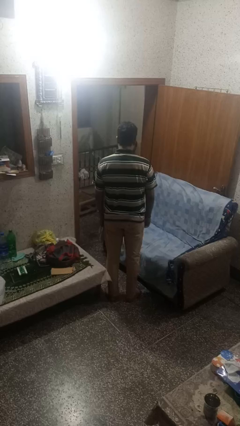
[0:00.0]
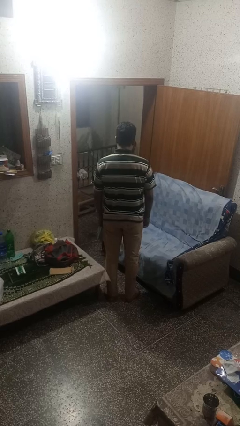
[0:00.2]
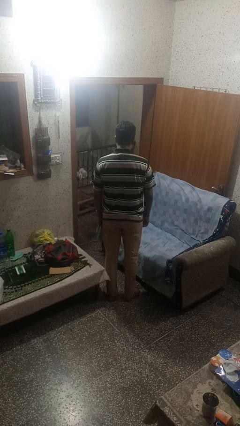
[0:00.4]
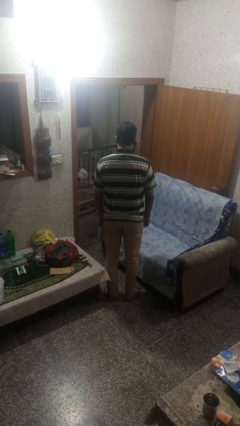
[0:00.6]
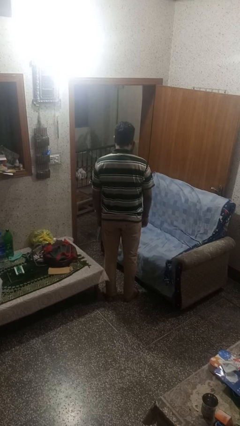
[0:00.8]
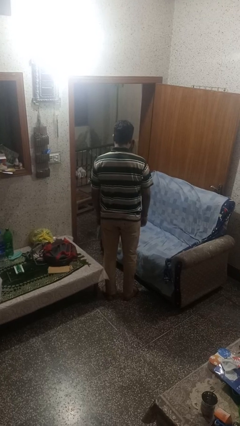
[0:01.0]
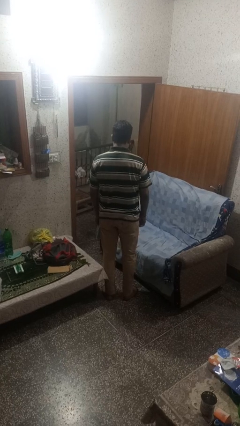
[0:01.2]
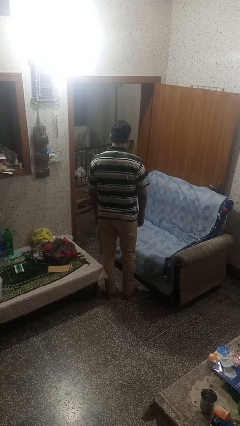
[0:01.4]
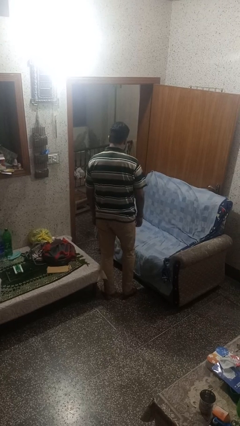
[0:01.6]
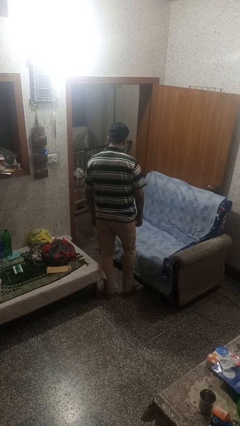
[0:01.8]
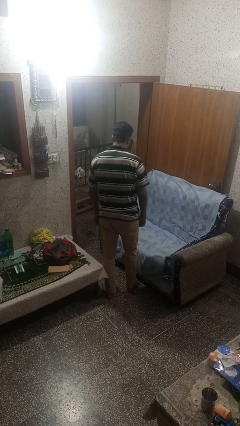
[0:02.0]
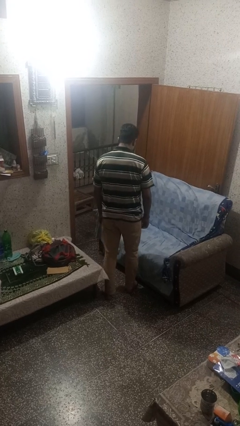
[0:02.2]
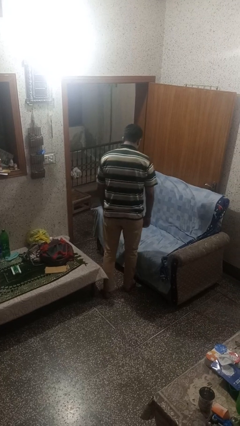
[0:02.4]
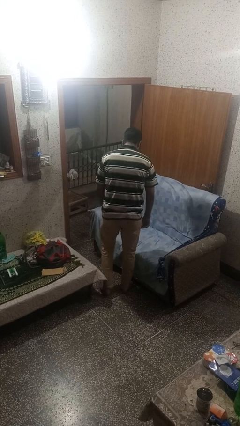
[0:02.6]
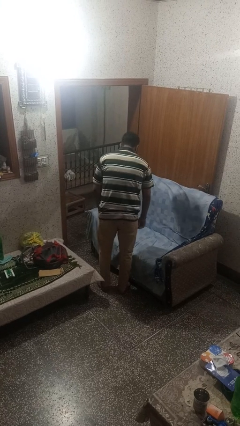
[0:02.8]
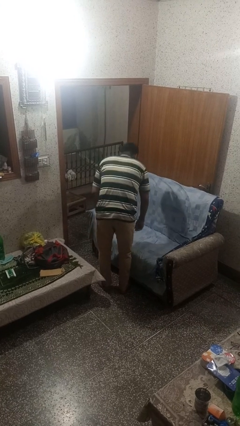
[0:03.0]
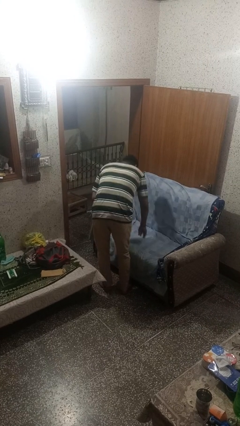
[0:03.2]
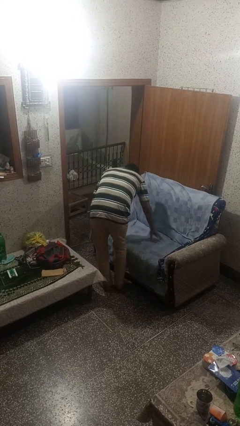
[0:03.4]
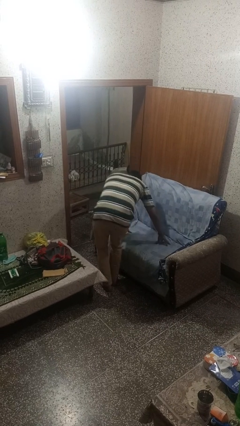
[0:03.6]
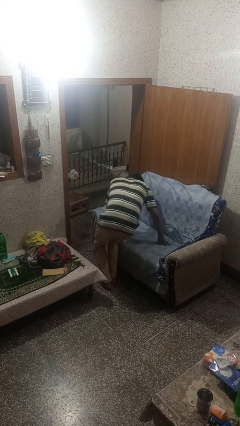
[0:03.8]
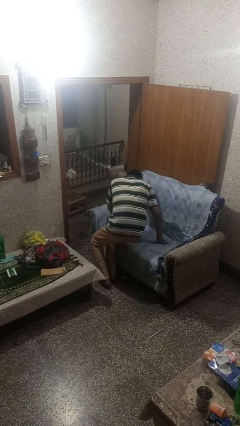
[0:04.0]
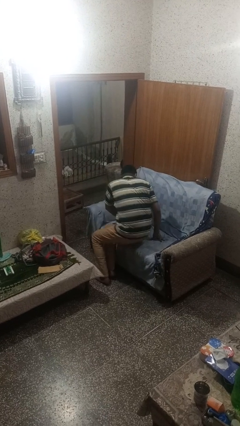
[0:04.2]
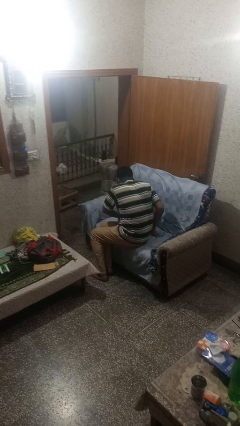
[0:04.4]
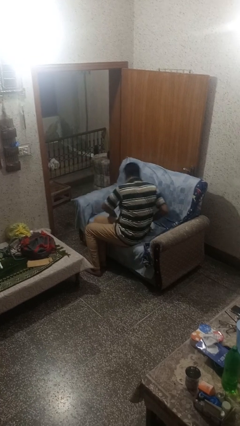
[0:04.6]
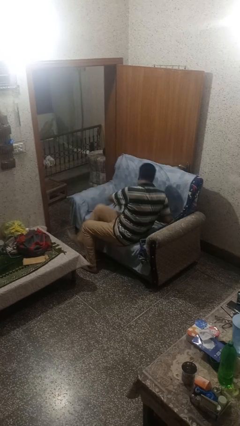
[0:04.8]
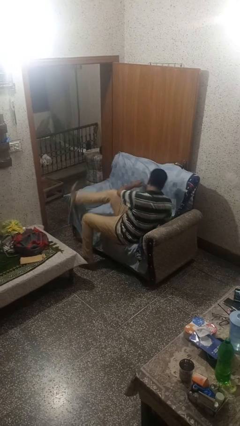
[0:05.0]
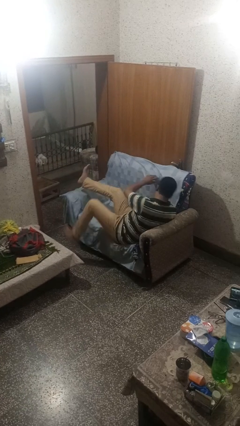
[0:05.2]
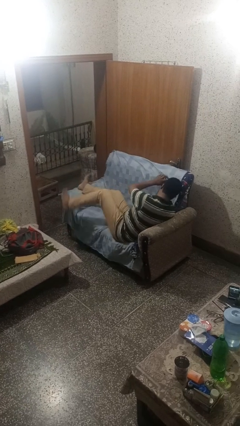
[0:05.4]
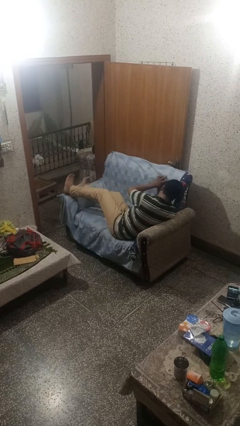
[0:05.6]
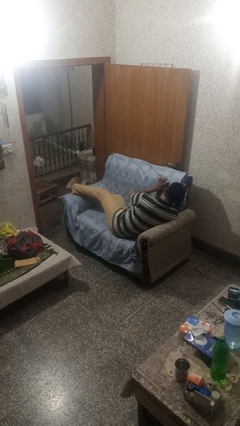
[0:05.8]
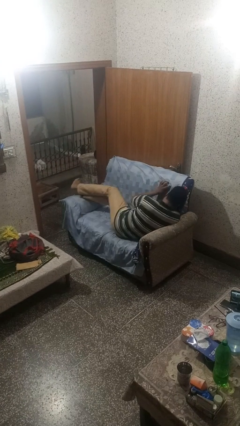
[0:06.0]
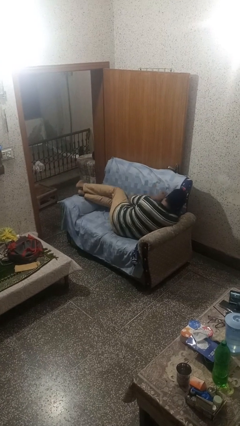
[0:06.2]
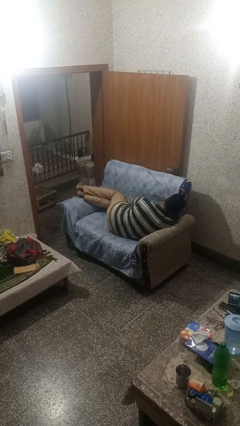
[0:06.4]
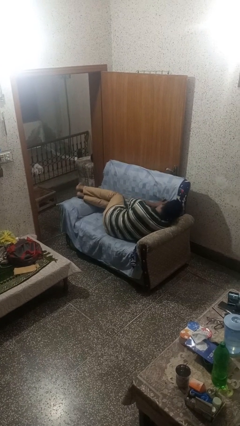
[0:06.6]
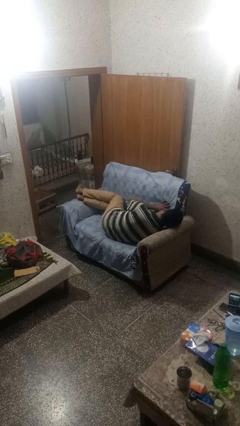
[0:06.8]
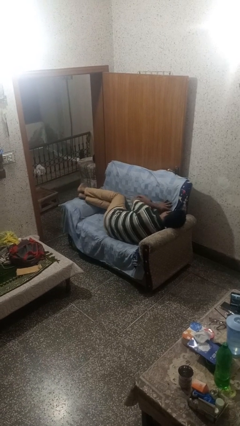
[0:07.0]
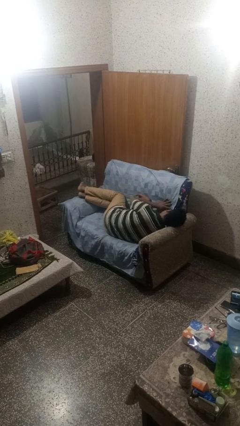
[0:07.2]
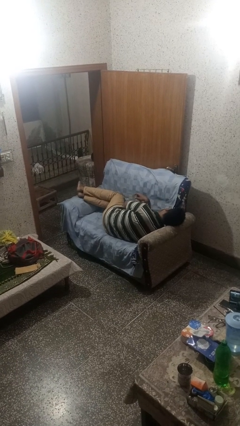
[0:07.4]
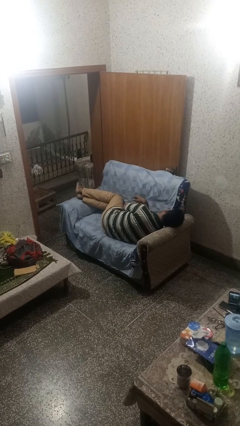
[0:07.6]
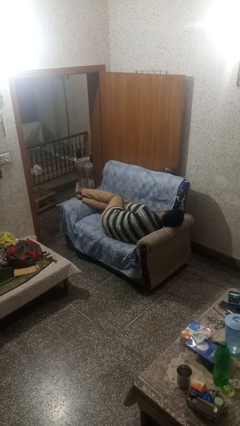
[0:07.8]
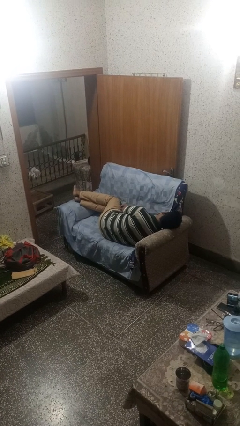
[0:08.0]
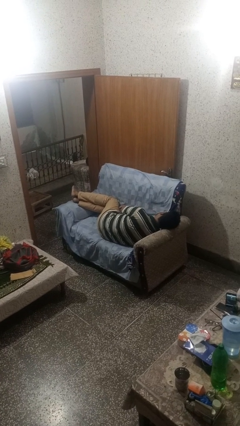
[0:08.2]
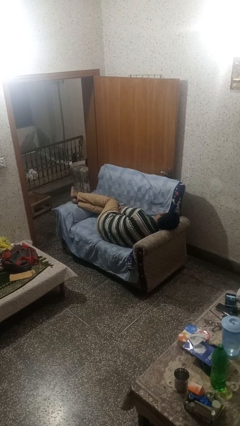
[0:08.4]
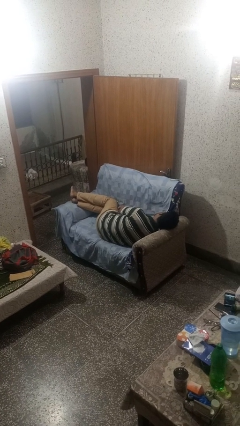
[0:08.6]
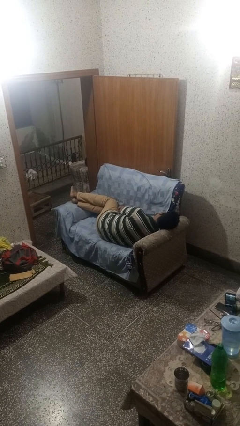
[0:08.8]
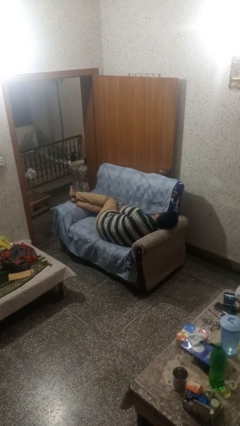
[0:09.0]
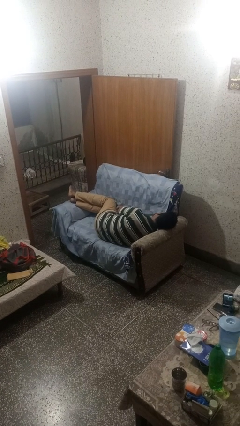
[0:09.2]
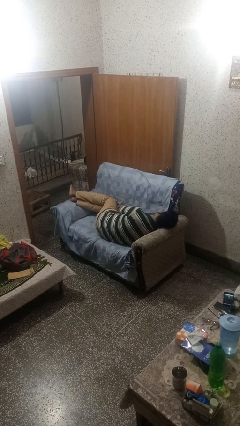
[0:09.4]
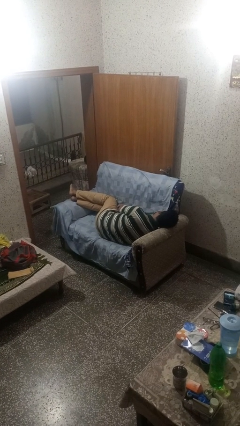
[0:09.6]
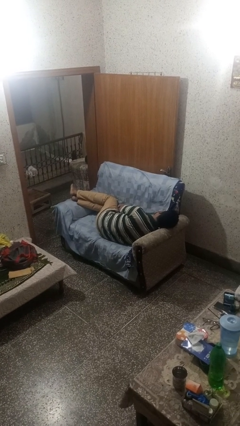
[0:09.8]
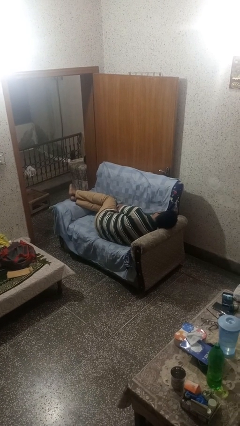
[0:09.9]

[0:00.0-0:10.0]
person lies down on couch

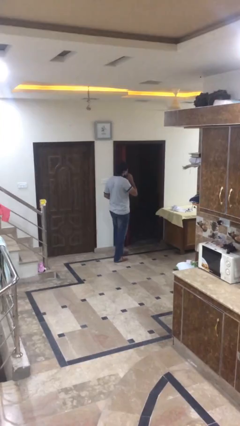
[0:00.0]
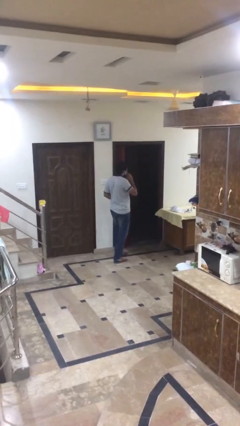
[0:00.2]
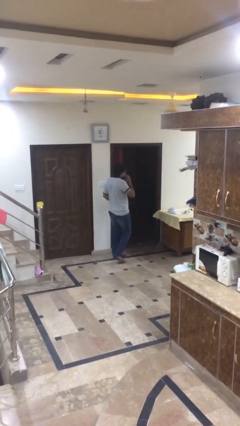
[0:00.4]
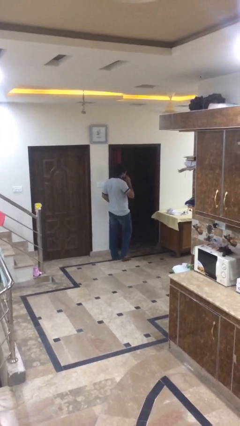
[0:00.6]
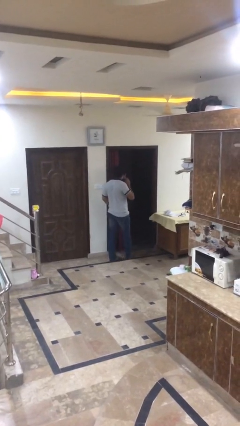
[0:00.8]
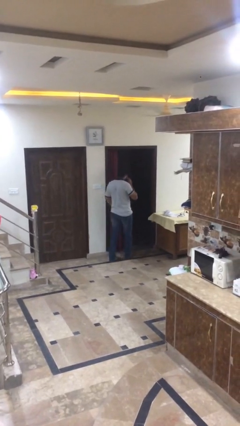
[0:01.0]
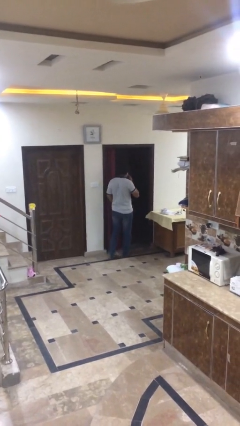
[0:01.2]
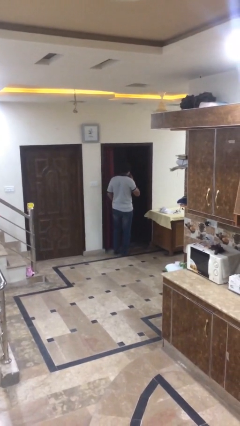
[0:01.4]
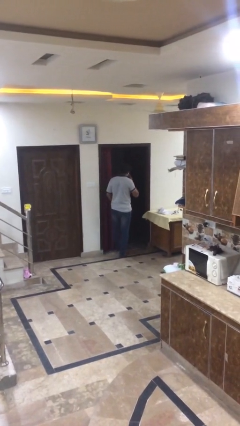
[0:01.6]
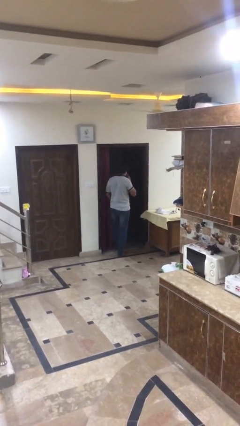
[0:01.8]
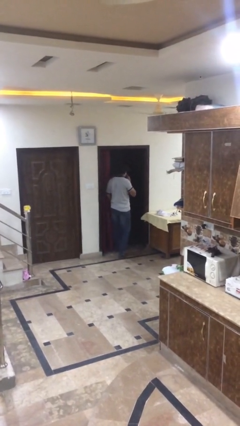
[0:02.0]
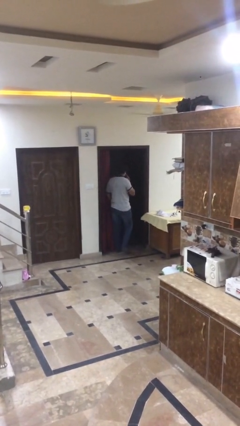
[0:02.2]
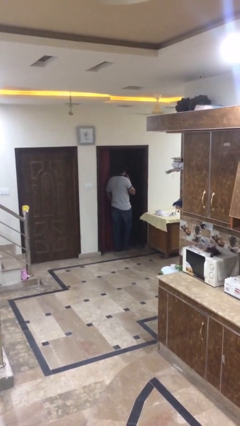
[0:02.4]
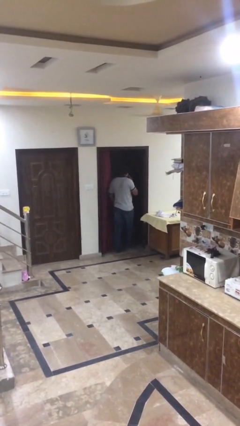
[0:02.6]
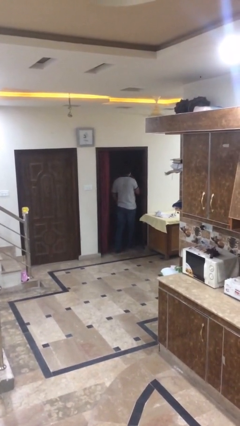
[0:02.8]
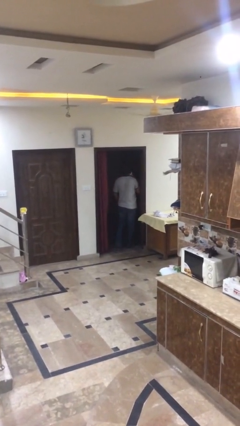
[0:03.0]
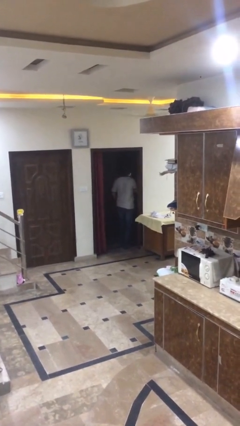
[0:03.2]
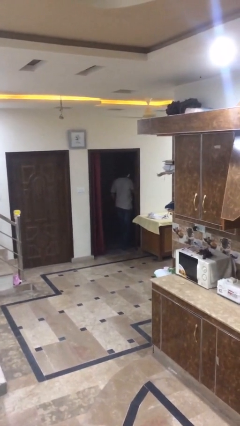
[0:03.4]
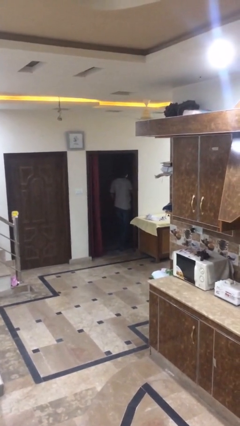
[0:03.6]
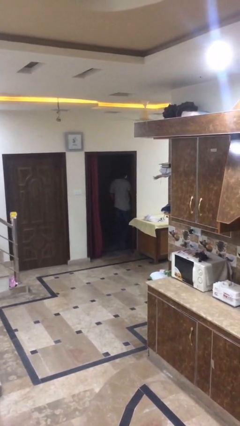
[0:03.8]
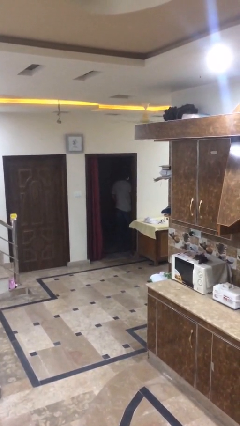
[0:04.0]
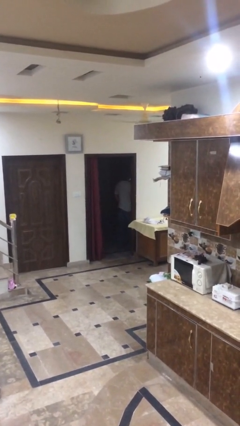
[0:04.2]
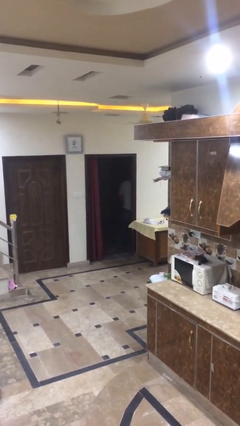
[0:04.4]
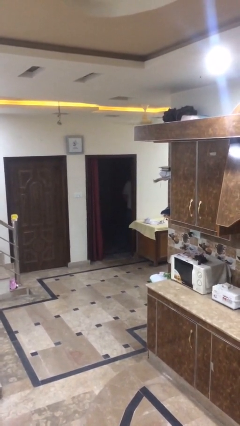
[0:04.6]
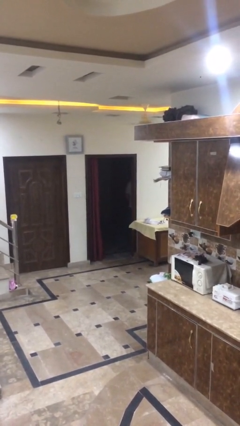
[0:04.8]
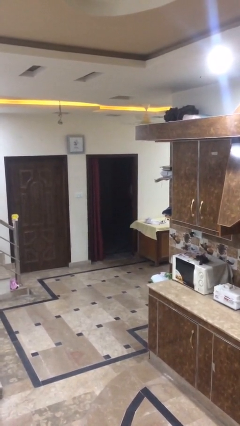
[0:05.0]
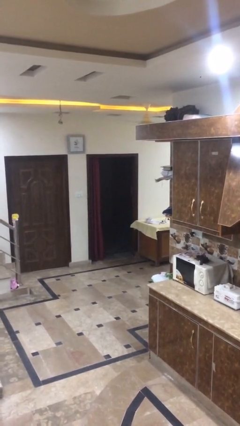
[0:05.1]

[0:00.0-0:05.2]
person exits scene through structure

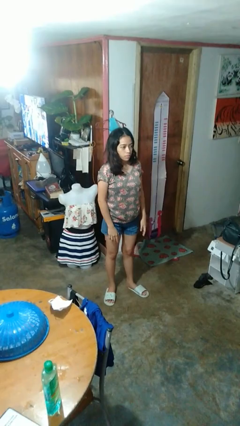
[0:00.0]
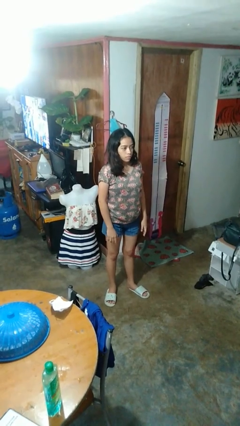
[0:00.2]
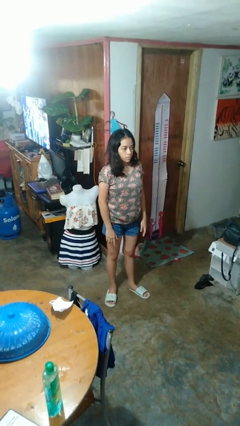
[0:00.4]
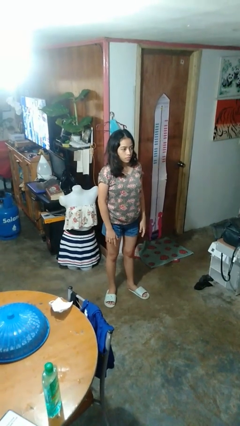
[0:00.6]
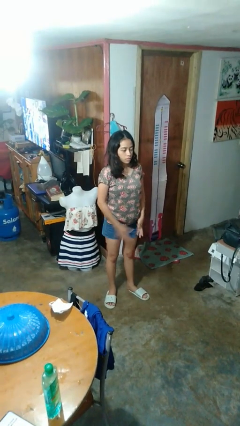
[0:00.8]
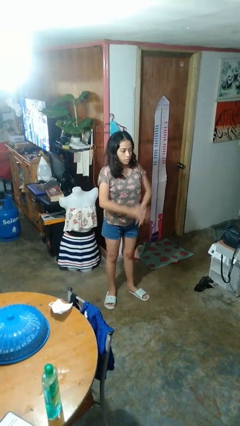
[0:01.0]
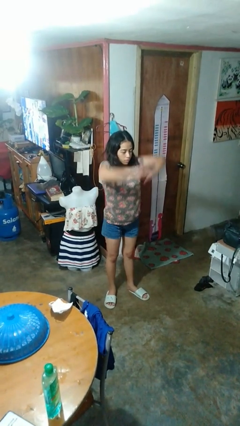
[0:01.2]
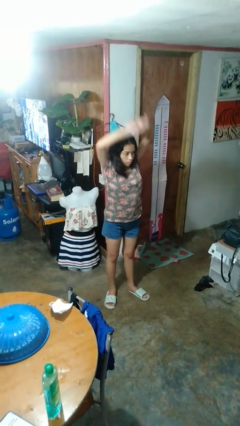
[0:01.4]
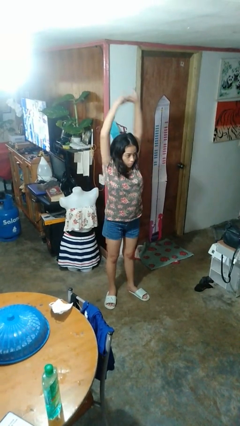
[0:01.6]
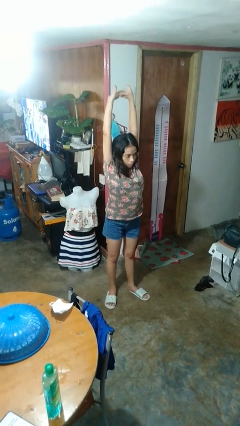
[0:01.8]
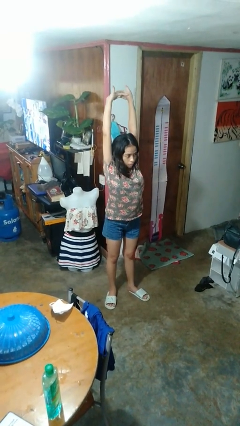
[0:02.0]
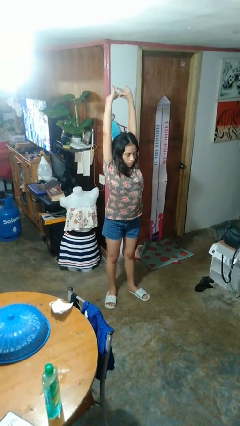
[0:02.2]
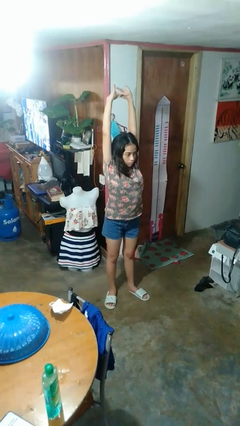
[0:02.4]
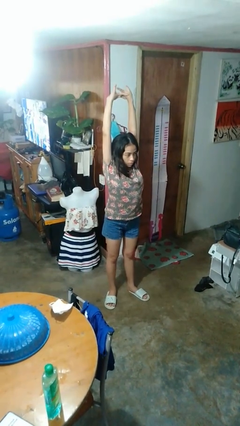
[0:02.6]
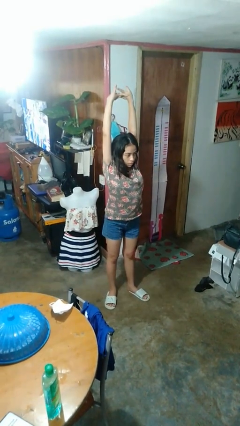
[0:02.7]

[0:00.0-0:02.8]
person stretches arms over head
